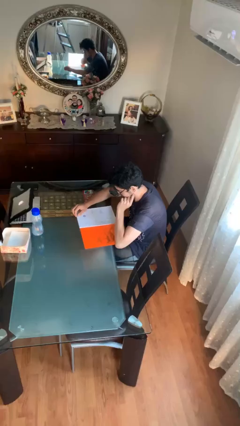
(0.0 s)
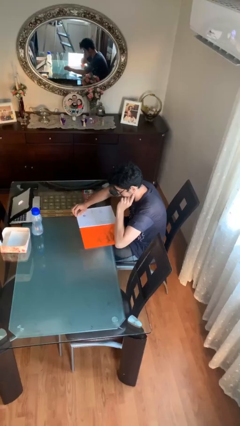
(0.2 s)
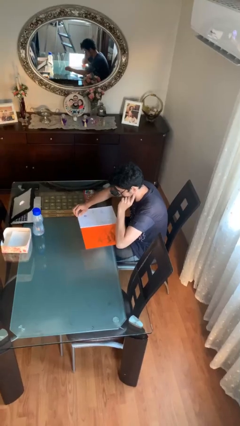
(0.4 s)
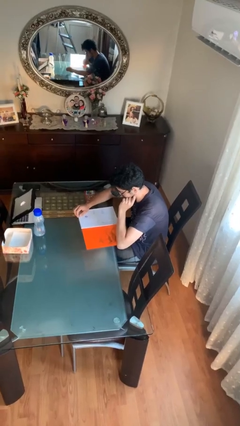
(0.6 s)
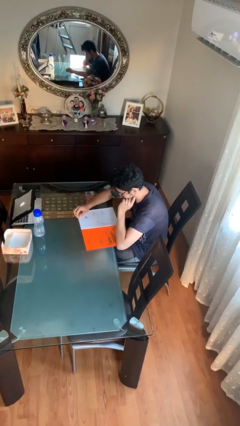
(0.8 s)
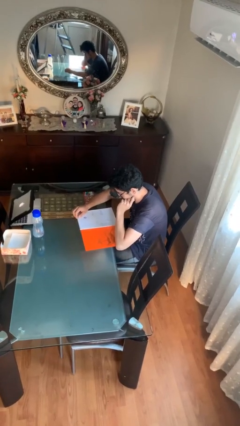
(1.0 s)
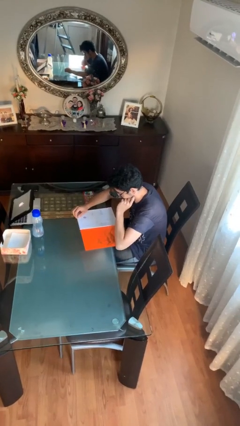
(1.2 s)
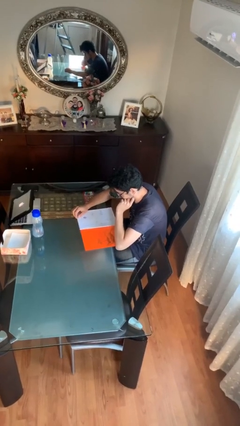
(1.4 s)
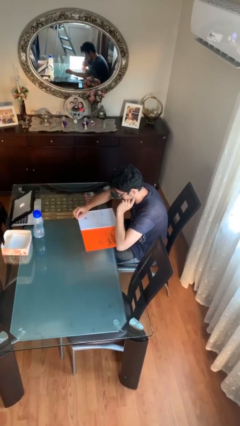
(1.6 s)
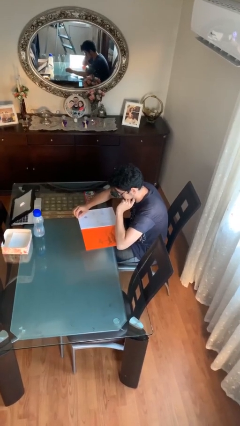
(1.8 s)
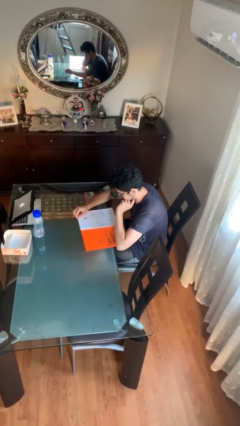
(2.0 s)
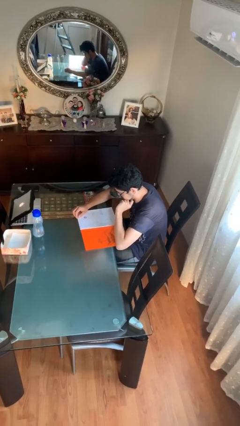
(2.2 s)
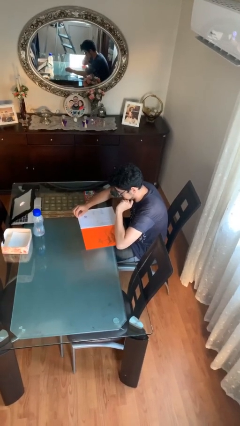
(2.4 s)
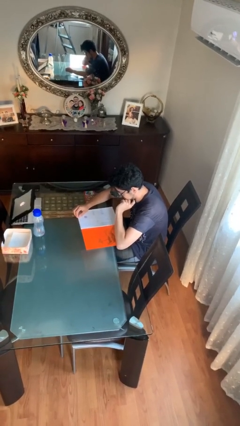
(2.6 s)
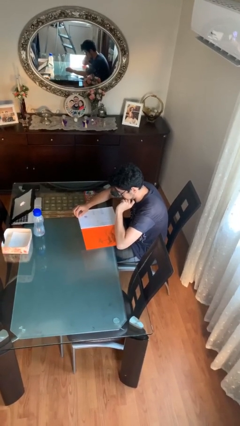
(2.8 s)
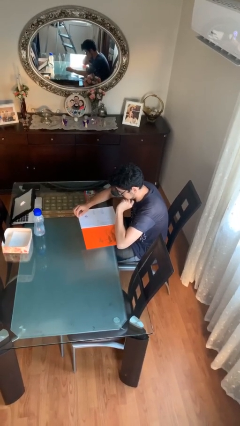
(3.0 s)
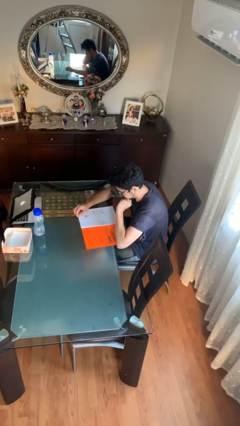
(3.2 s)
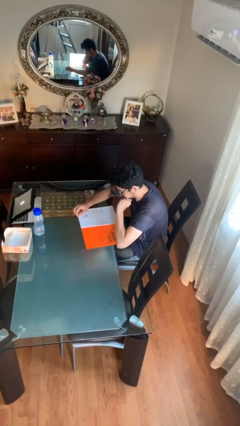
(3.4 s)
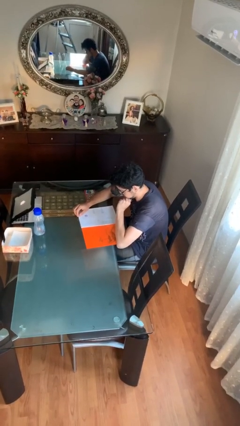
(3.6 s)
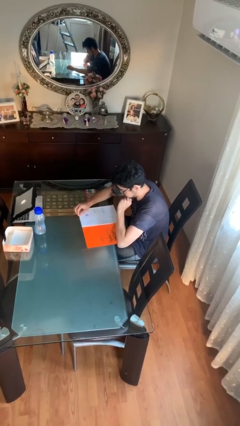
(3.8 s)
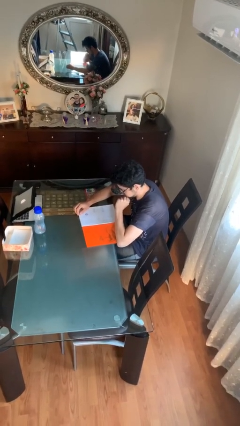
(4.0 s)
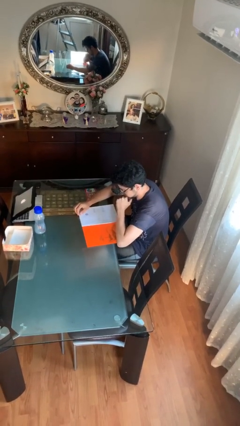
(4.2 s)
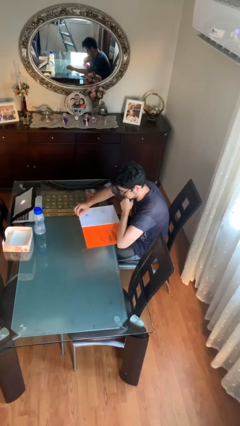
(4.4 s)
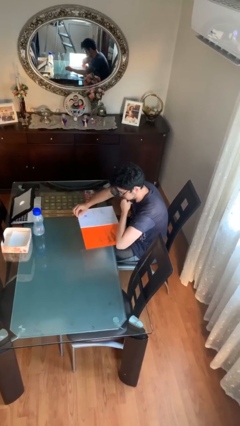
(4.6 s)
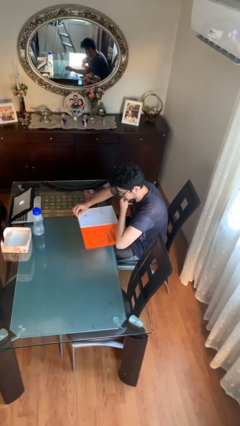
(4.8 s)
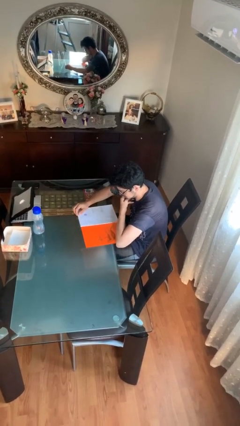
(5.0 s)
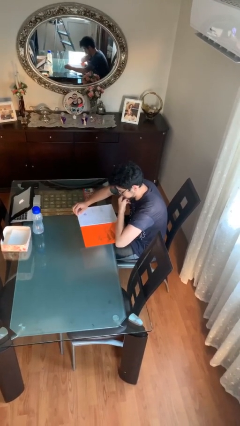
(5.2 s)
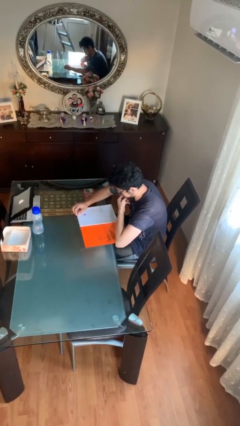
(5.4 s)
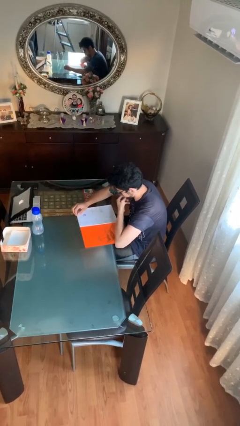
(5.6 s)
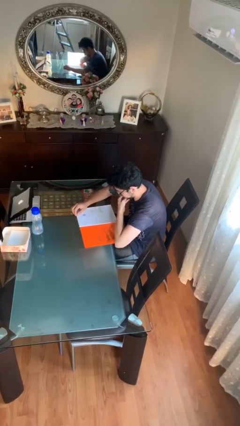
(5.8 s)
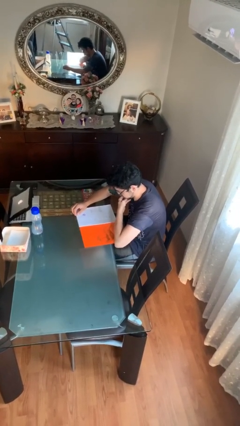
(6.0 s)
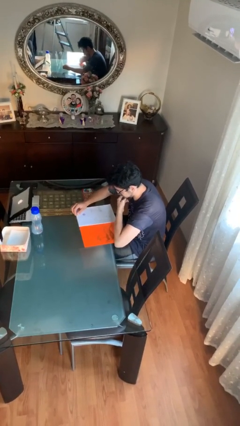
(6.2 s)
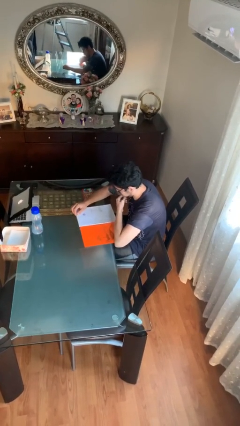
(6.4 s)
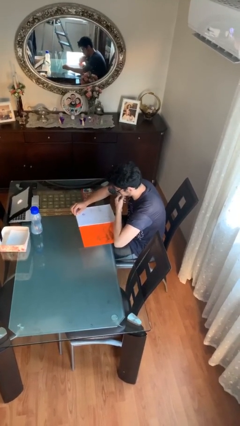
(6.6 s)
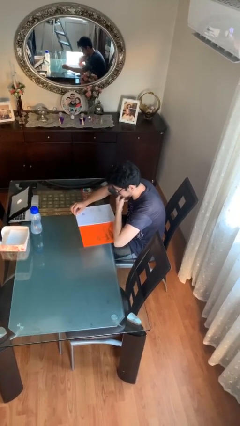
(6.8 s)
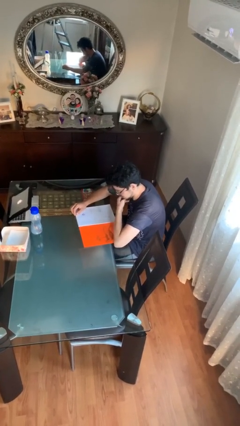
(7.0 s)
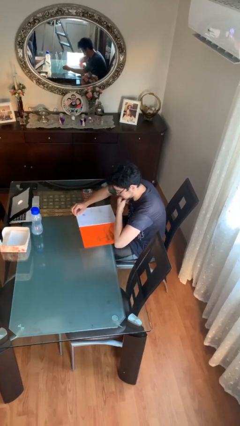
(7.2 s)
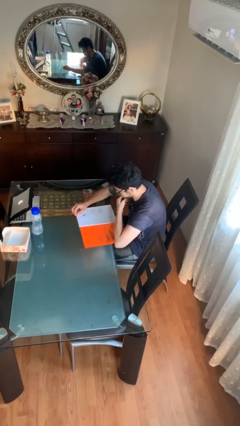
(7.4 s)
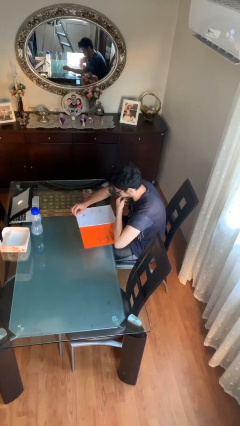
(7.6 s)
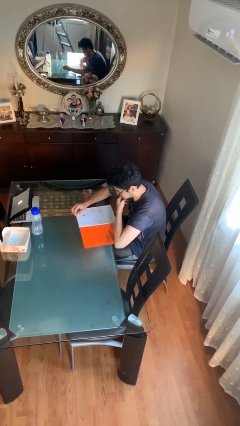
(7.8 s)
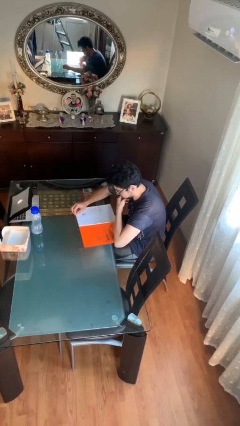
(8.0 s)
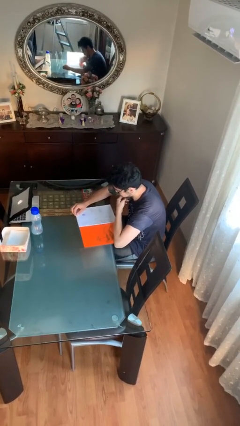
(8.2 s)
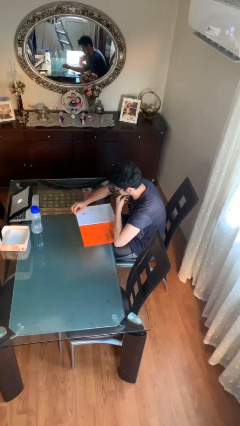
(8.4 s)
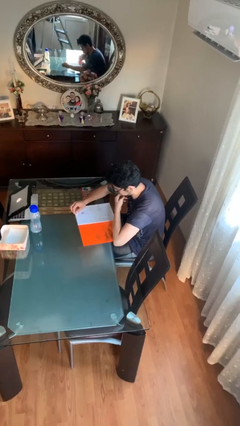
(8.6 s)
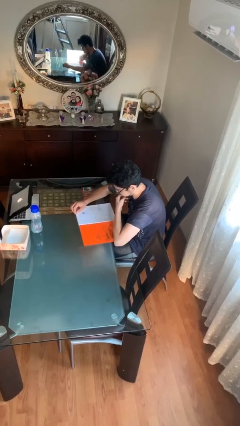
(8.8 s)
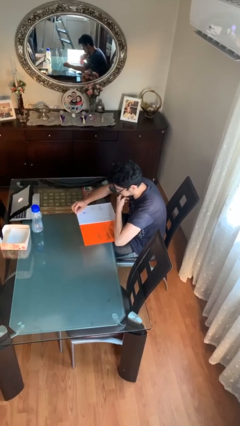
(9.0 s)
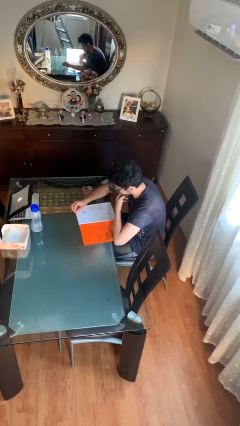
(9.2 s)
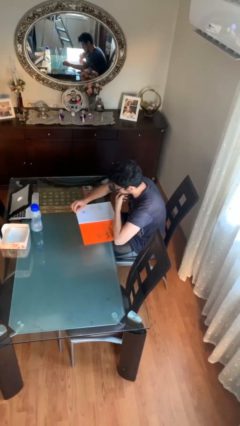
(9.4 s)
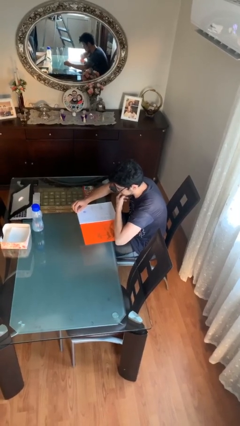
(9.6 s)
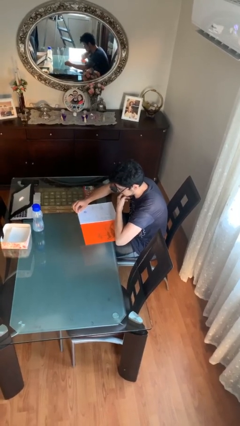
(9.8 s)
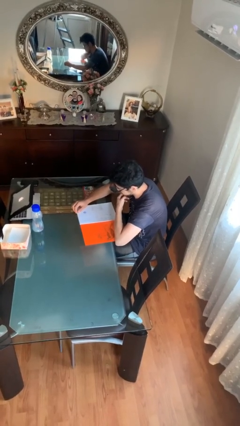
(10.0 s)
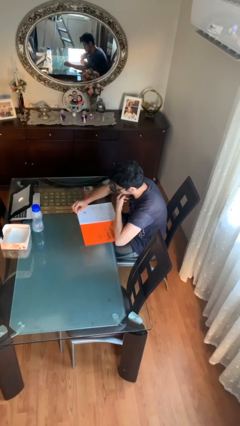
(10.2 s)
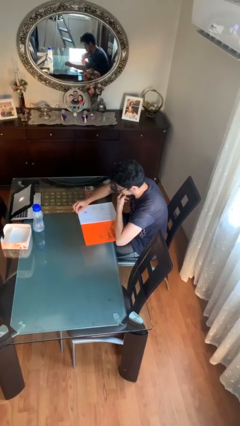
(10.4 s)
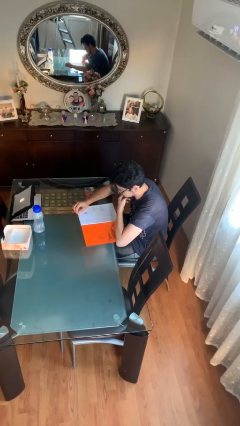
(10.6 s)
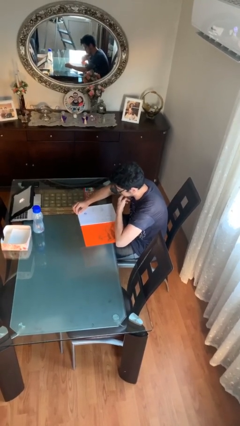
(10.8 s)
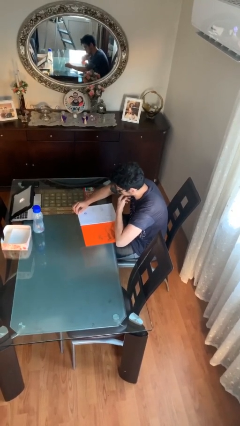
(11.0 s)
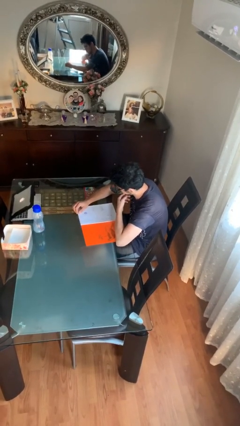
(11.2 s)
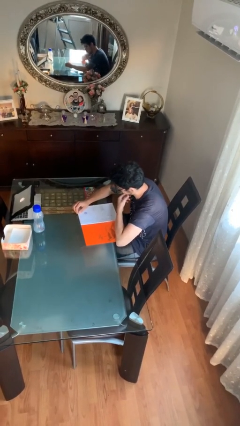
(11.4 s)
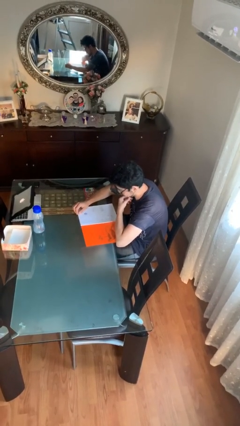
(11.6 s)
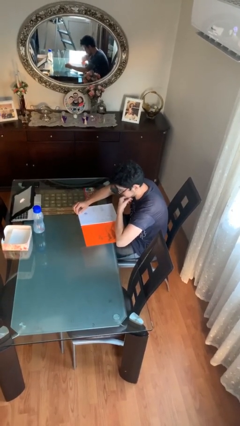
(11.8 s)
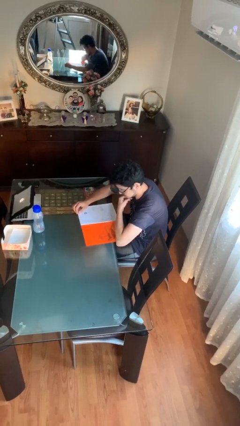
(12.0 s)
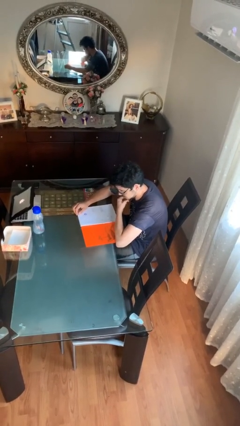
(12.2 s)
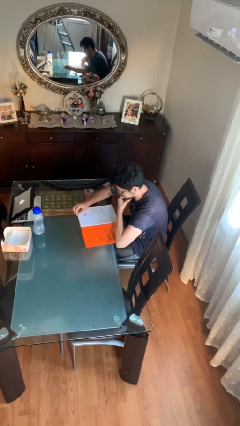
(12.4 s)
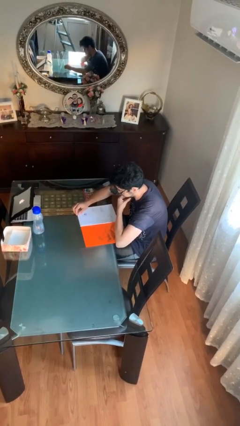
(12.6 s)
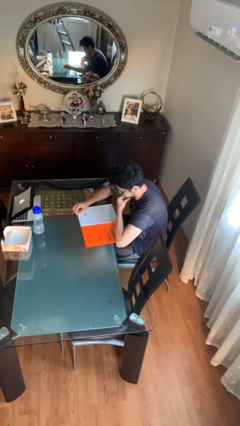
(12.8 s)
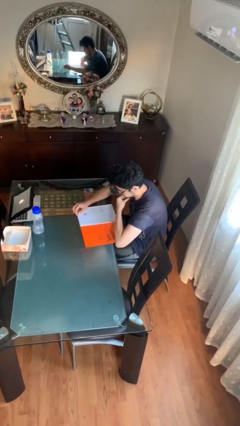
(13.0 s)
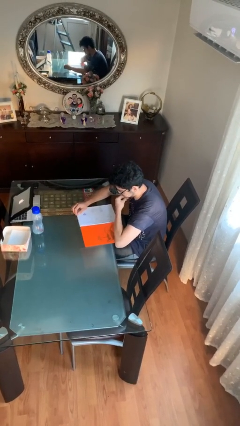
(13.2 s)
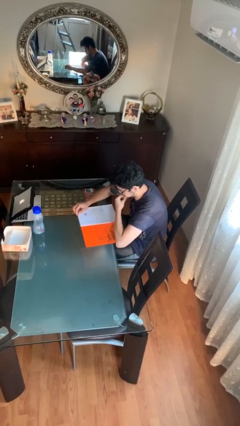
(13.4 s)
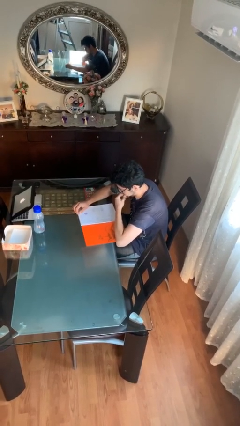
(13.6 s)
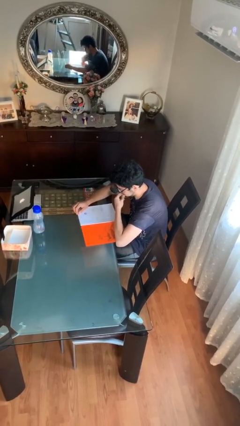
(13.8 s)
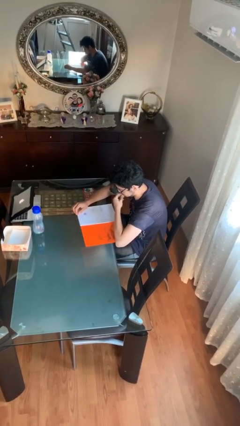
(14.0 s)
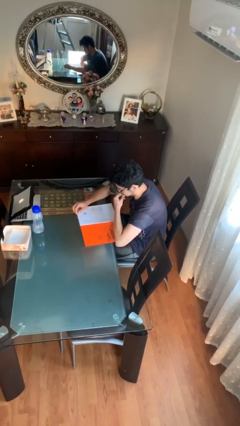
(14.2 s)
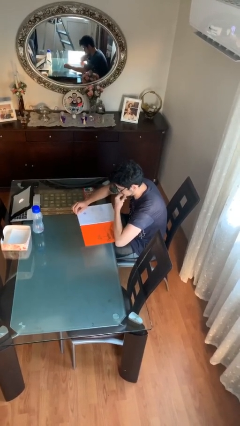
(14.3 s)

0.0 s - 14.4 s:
person reads document

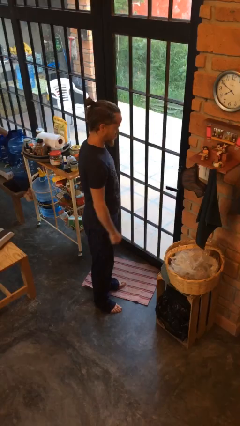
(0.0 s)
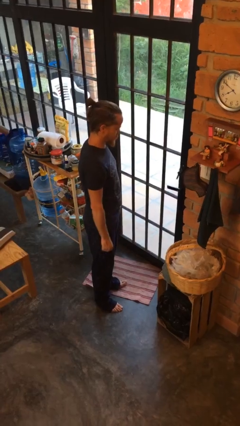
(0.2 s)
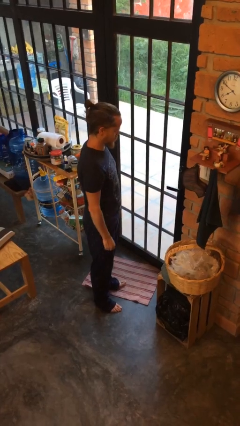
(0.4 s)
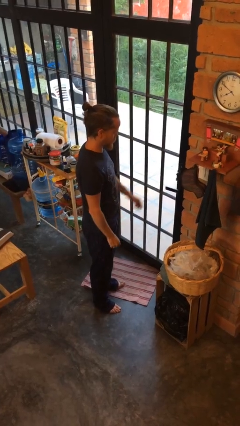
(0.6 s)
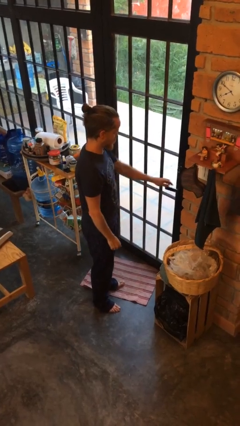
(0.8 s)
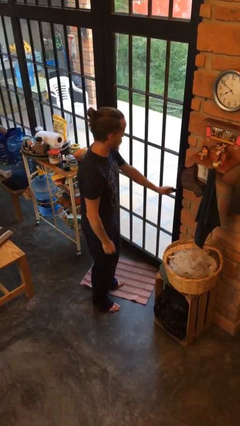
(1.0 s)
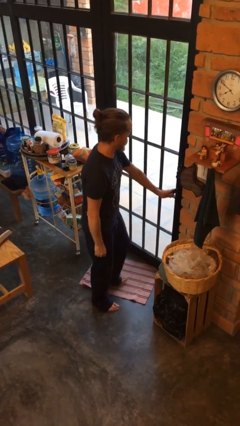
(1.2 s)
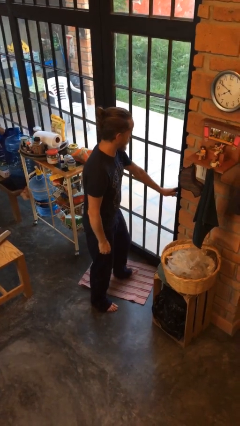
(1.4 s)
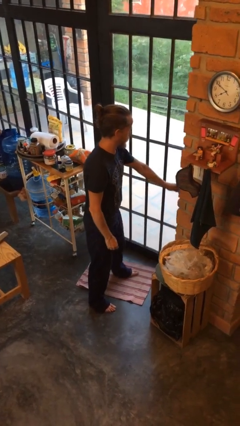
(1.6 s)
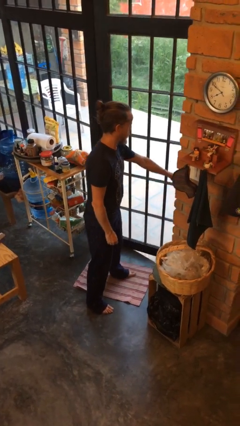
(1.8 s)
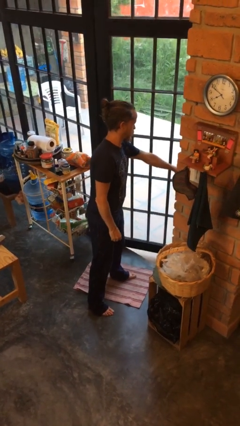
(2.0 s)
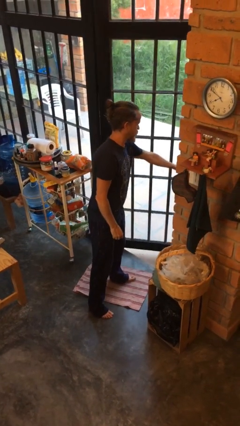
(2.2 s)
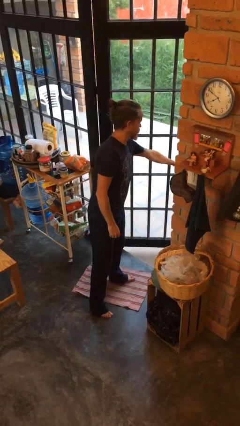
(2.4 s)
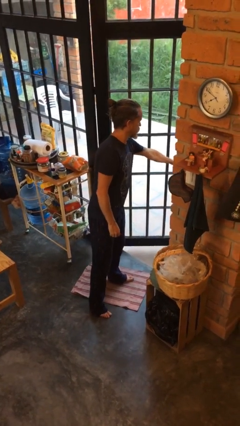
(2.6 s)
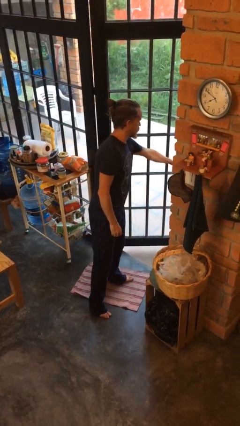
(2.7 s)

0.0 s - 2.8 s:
person opens facility door

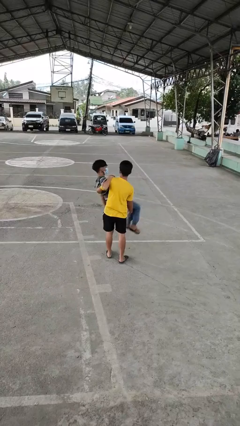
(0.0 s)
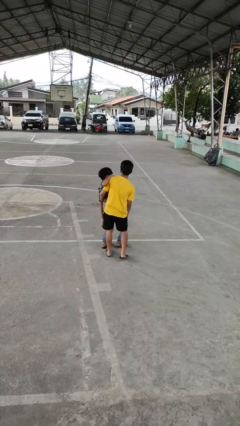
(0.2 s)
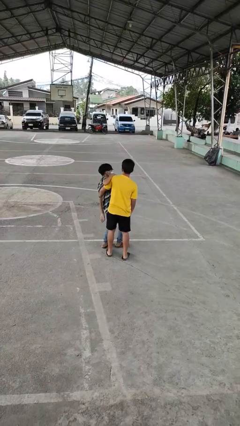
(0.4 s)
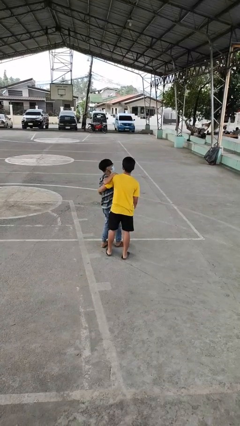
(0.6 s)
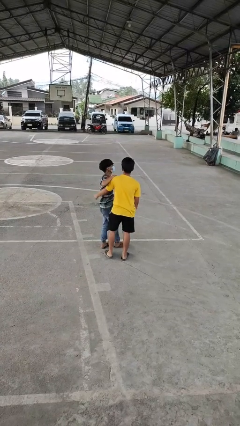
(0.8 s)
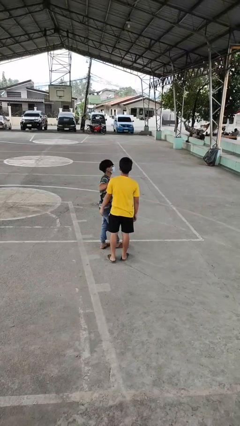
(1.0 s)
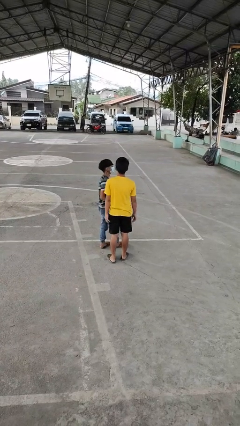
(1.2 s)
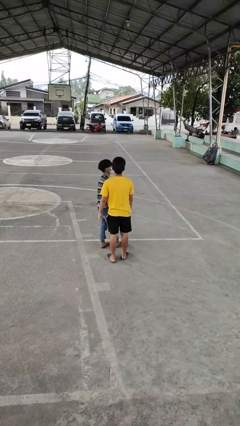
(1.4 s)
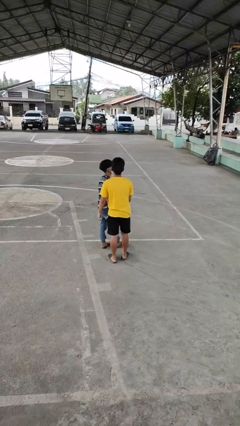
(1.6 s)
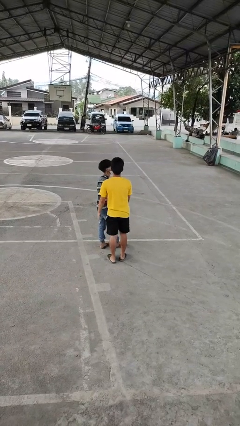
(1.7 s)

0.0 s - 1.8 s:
person puts down person
